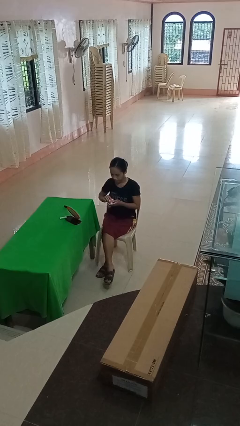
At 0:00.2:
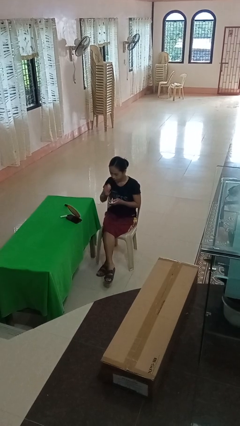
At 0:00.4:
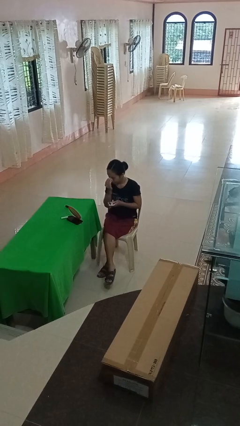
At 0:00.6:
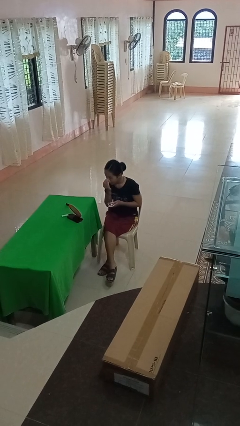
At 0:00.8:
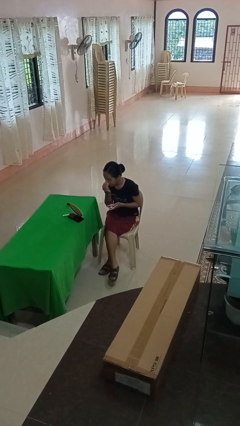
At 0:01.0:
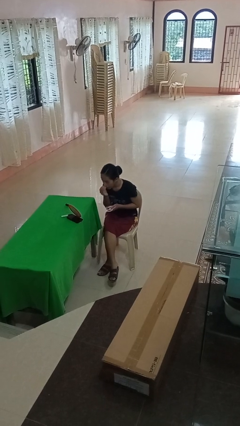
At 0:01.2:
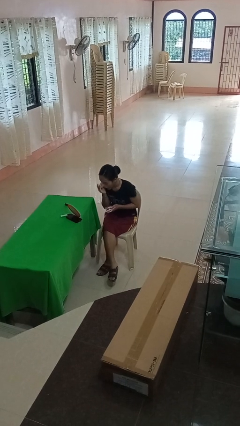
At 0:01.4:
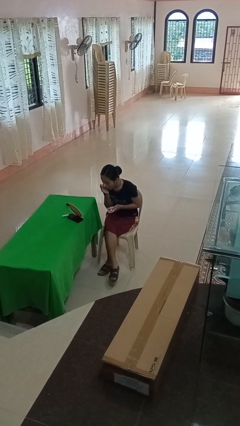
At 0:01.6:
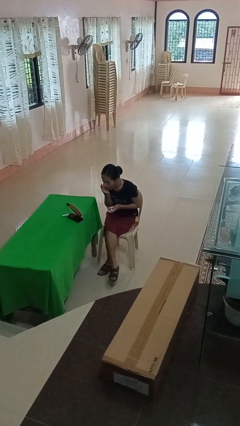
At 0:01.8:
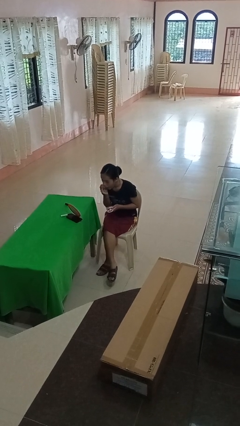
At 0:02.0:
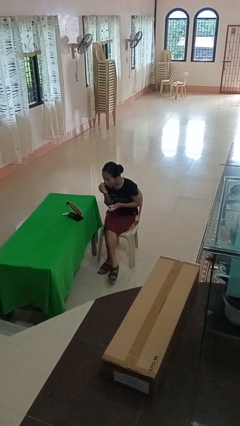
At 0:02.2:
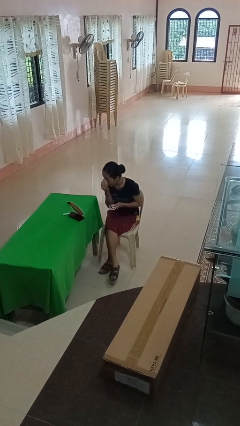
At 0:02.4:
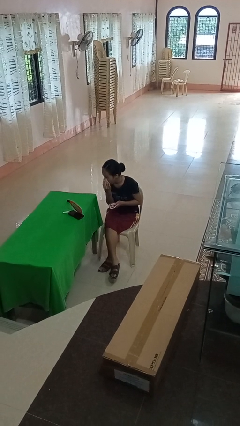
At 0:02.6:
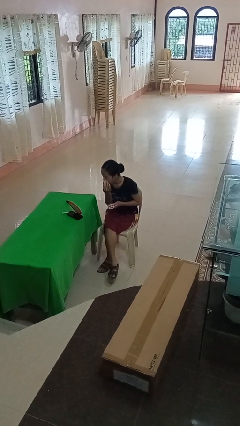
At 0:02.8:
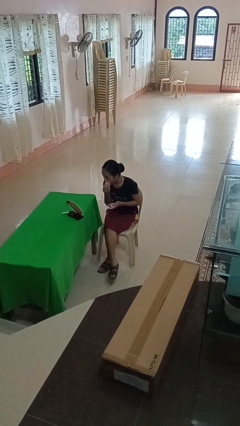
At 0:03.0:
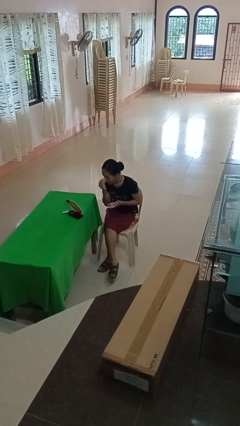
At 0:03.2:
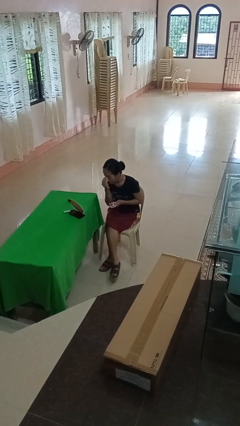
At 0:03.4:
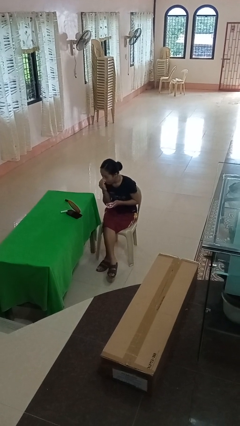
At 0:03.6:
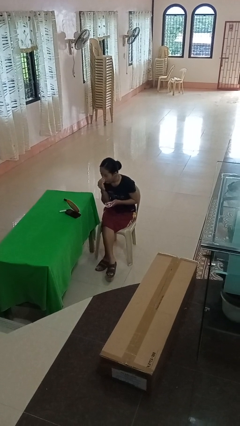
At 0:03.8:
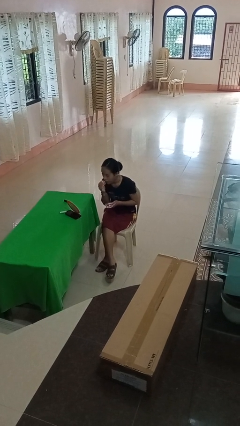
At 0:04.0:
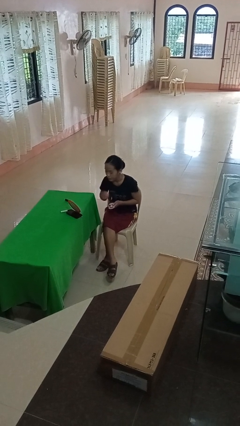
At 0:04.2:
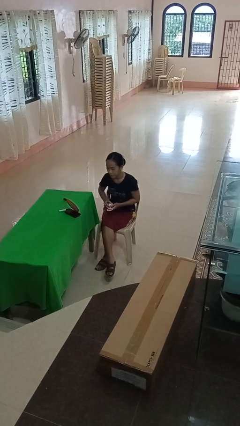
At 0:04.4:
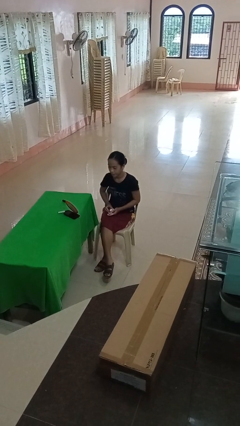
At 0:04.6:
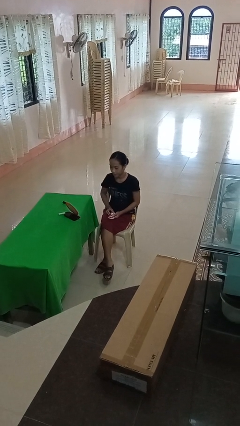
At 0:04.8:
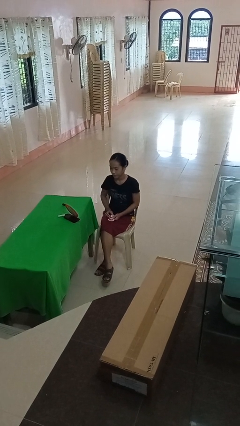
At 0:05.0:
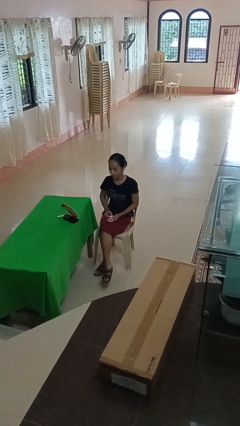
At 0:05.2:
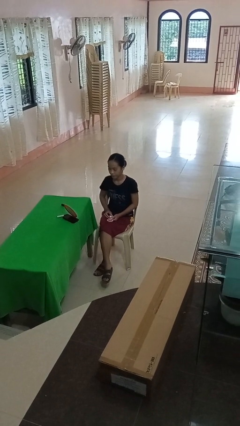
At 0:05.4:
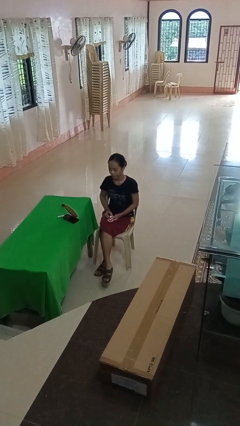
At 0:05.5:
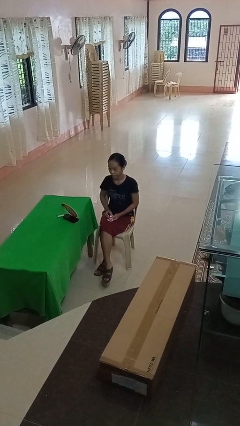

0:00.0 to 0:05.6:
person applies foundation makeup

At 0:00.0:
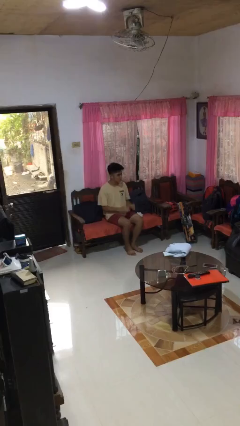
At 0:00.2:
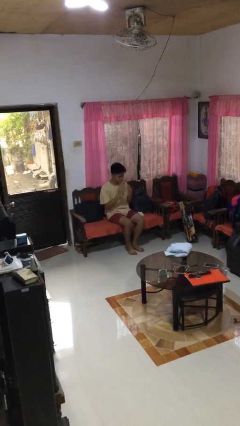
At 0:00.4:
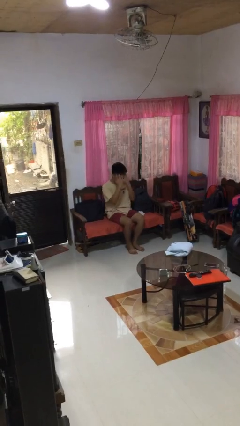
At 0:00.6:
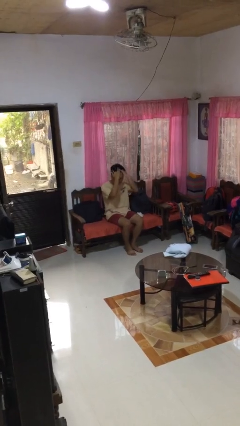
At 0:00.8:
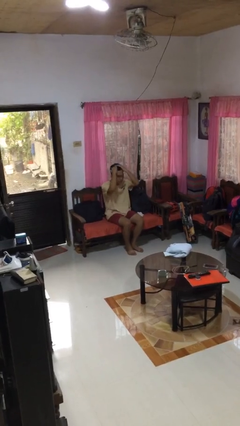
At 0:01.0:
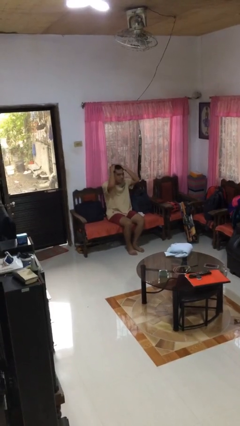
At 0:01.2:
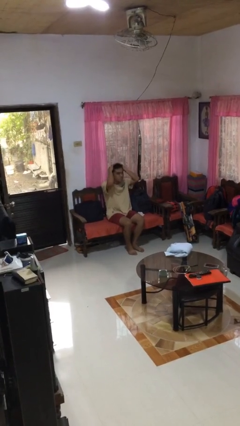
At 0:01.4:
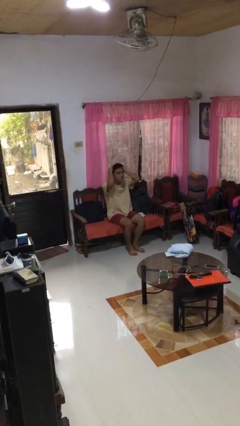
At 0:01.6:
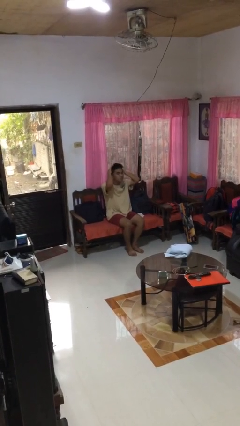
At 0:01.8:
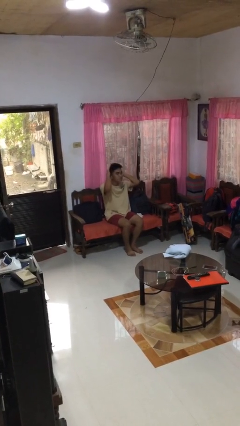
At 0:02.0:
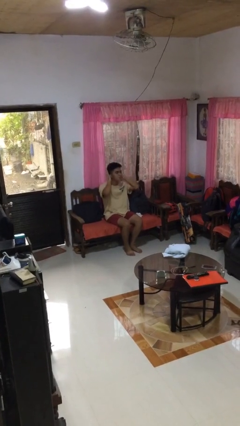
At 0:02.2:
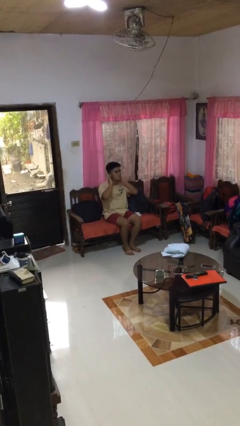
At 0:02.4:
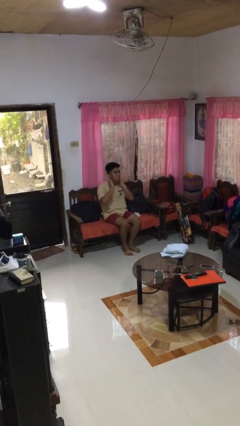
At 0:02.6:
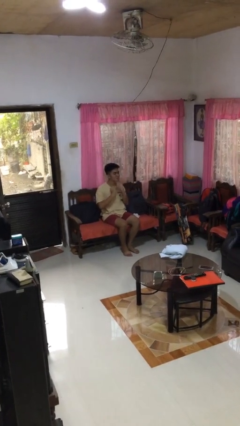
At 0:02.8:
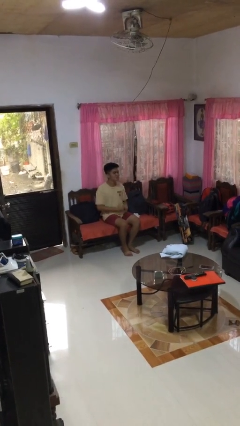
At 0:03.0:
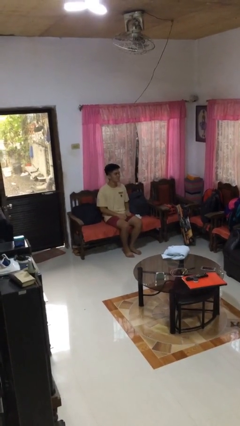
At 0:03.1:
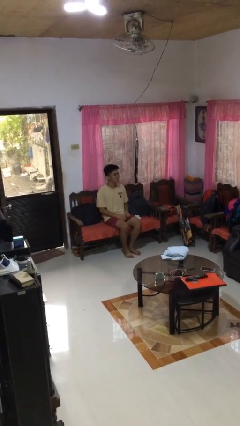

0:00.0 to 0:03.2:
person strokes hair

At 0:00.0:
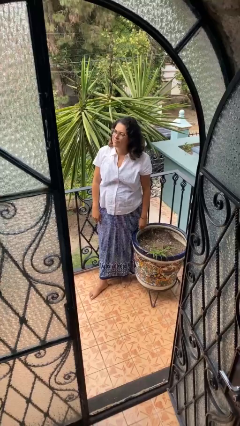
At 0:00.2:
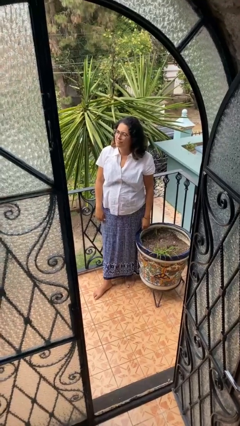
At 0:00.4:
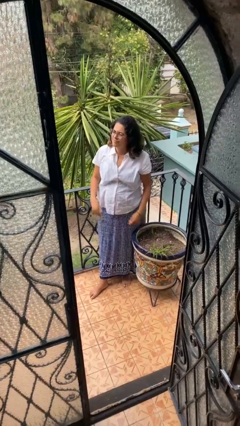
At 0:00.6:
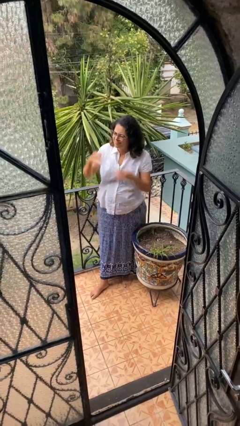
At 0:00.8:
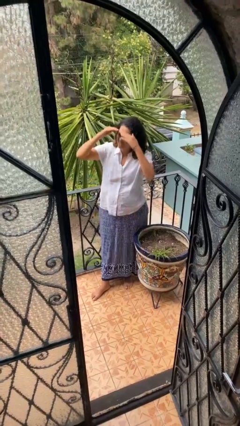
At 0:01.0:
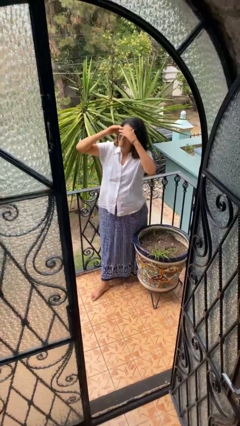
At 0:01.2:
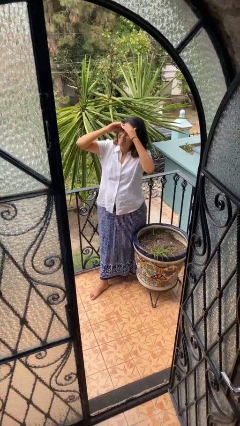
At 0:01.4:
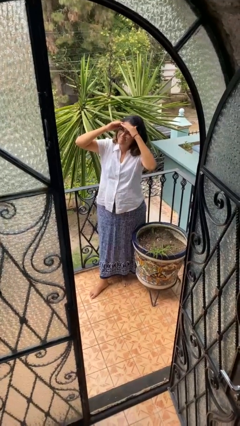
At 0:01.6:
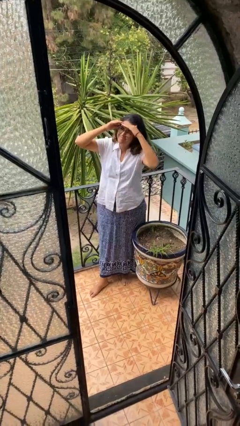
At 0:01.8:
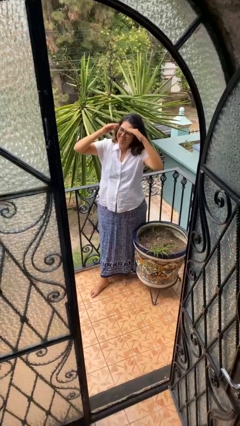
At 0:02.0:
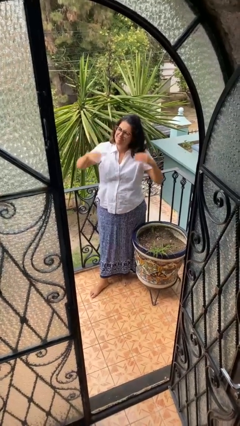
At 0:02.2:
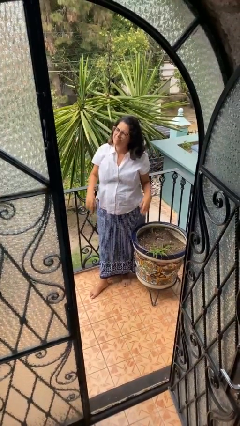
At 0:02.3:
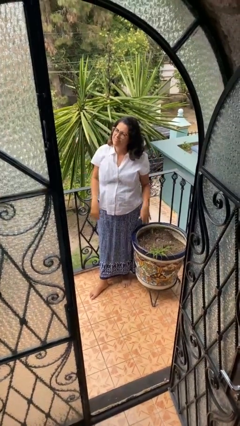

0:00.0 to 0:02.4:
person shades eyes

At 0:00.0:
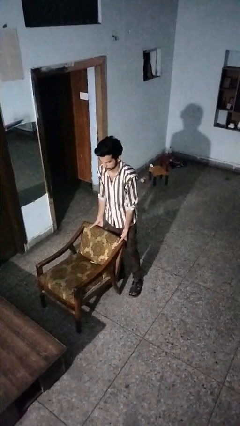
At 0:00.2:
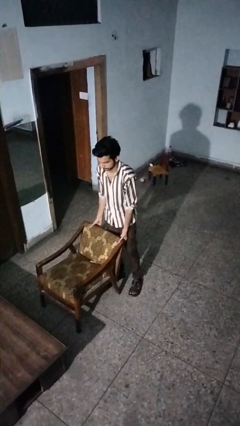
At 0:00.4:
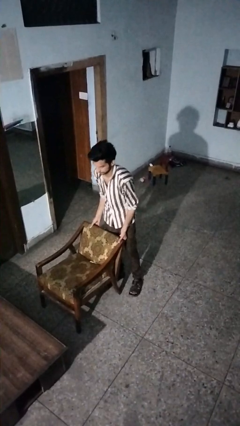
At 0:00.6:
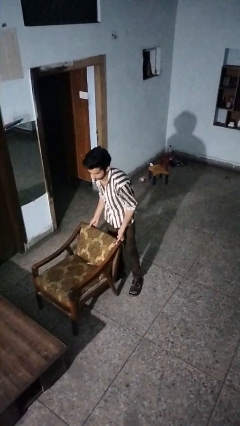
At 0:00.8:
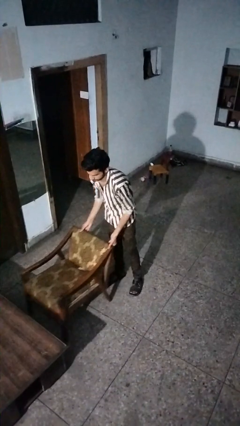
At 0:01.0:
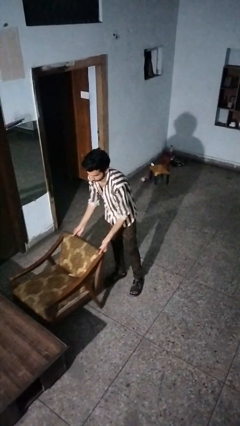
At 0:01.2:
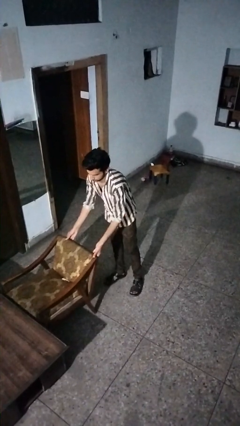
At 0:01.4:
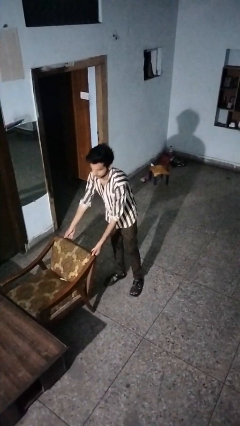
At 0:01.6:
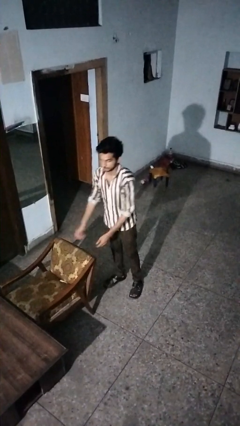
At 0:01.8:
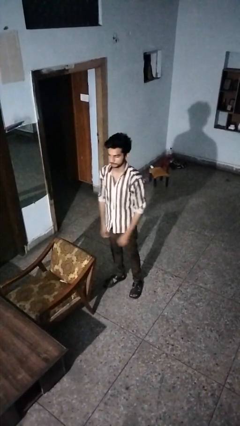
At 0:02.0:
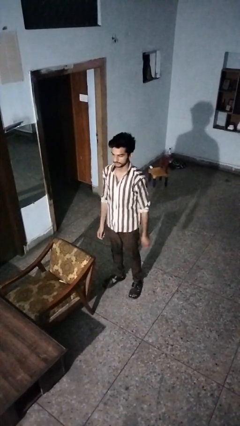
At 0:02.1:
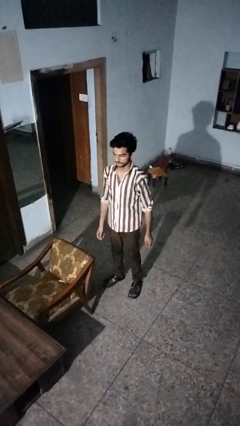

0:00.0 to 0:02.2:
person pushes in chair

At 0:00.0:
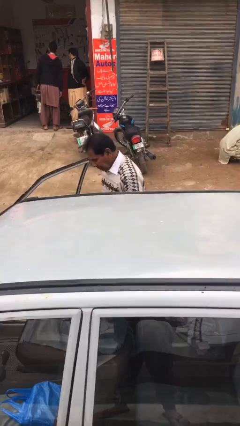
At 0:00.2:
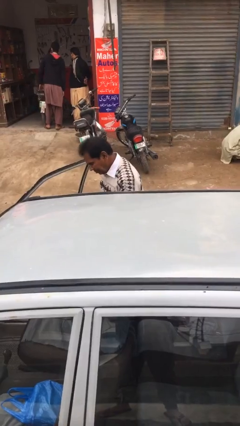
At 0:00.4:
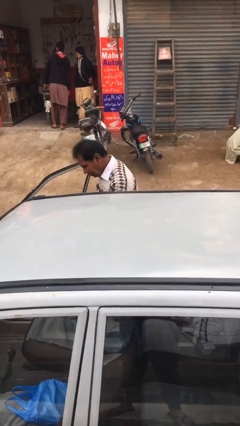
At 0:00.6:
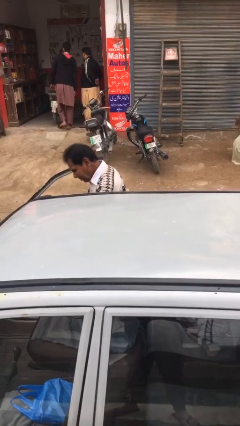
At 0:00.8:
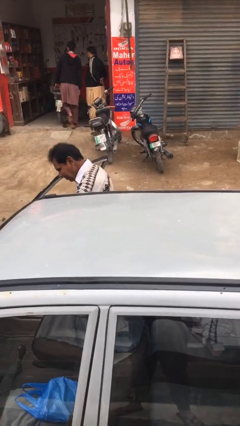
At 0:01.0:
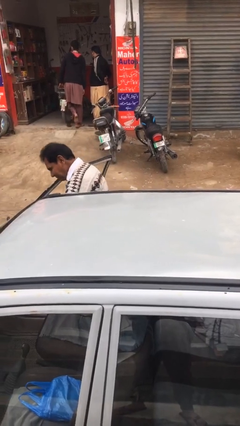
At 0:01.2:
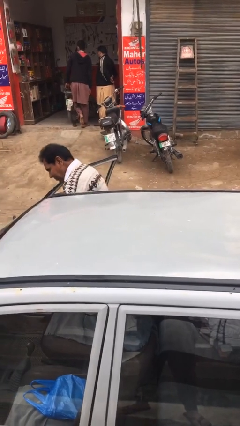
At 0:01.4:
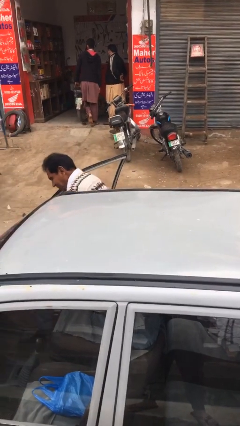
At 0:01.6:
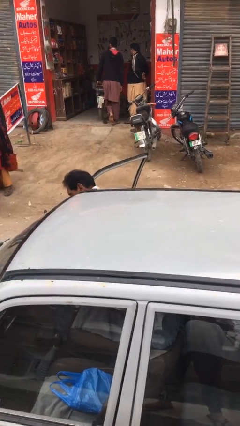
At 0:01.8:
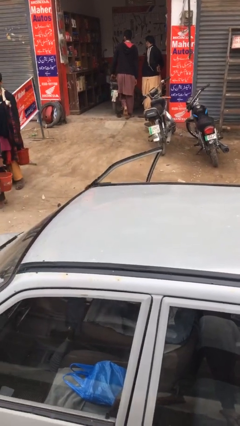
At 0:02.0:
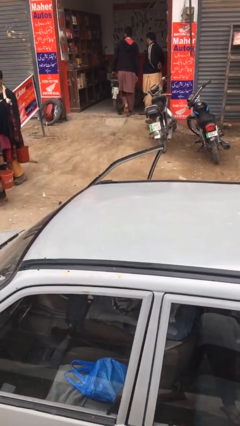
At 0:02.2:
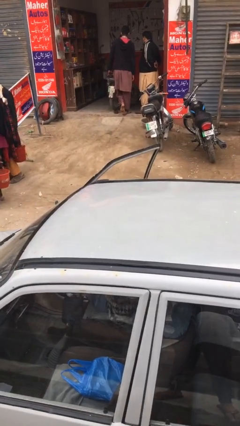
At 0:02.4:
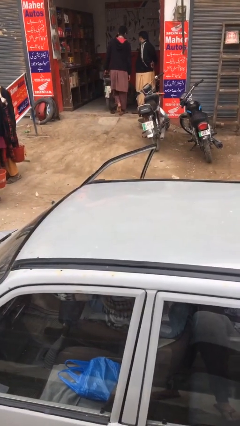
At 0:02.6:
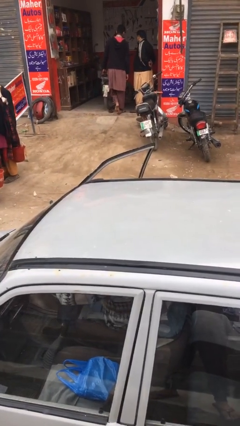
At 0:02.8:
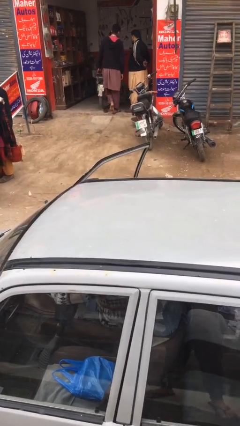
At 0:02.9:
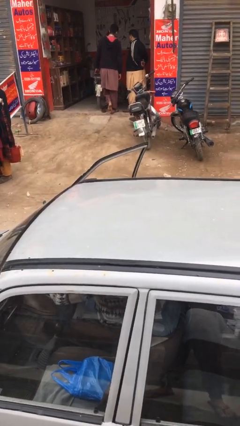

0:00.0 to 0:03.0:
person enters car

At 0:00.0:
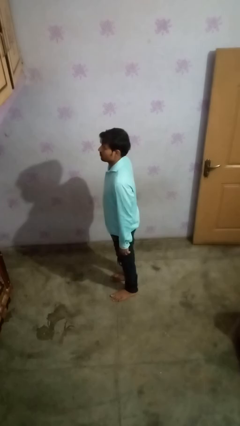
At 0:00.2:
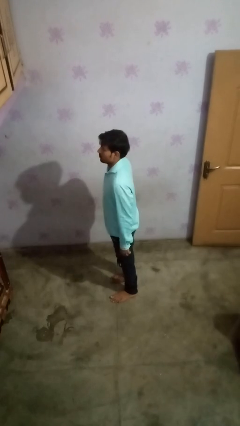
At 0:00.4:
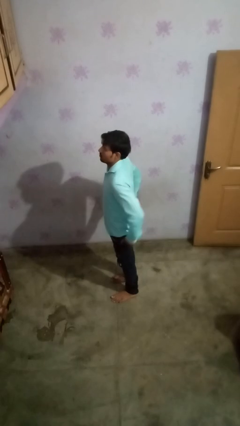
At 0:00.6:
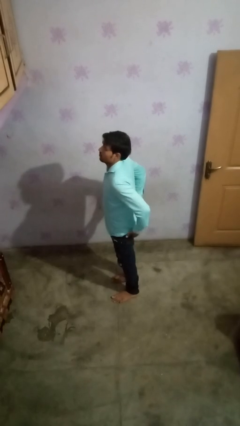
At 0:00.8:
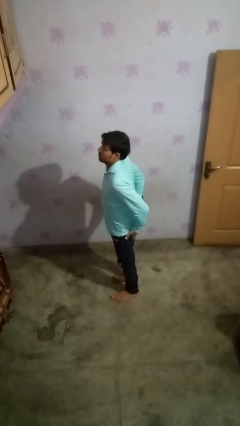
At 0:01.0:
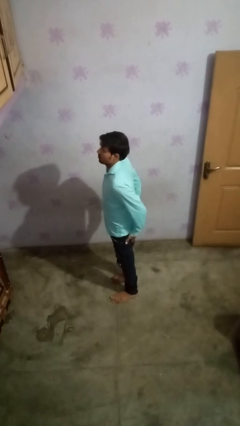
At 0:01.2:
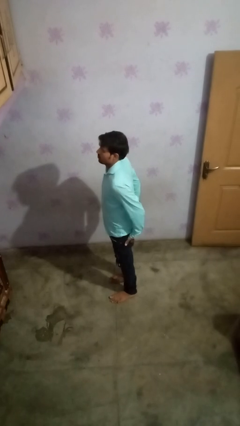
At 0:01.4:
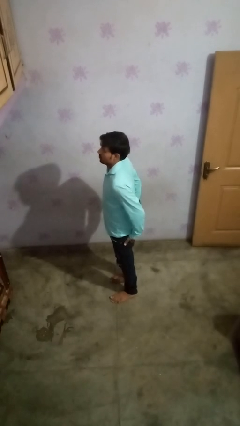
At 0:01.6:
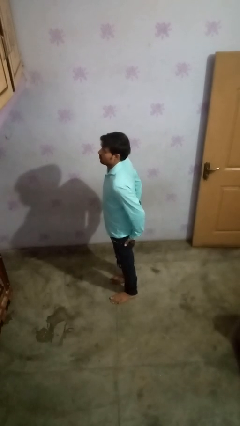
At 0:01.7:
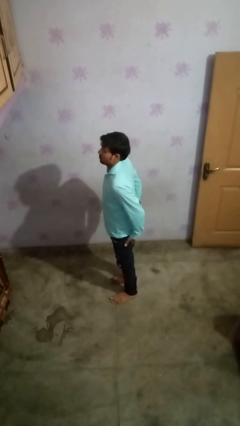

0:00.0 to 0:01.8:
person puts hands in back pockets
